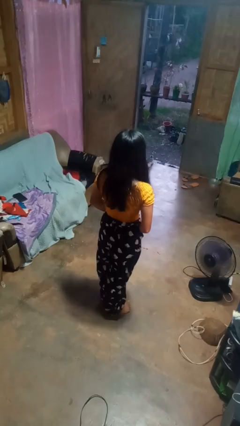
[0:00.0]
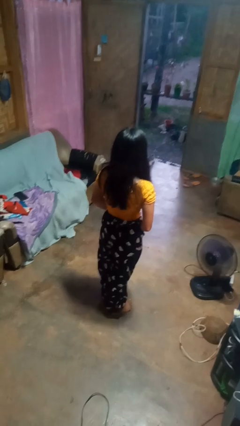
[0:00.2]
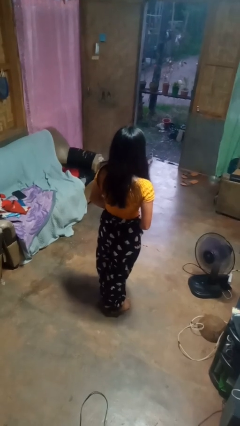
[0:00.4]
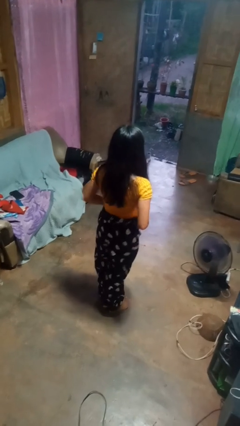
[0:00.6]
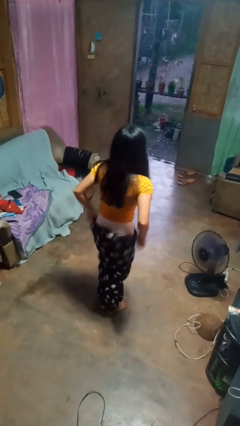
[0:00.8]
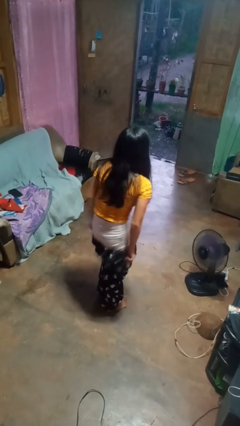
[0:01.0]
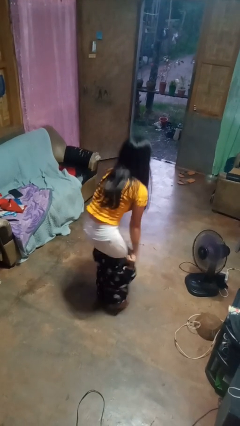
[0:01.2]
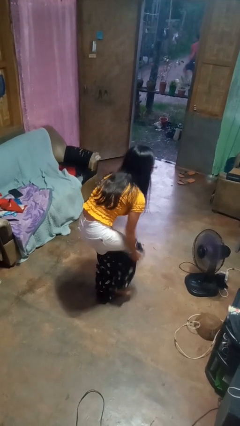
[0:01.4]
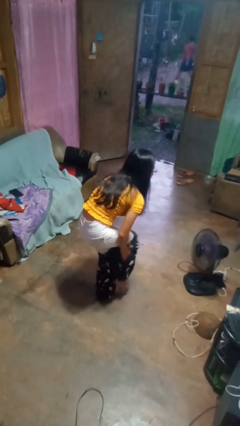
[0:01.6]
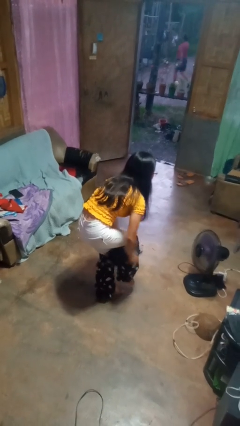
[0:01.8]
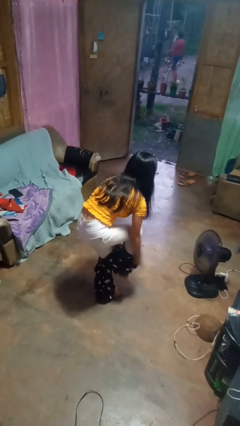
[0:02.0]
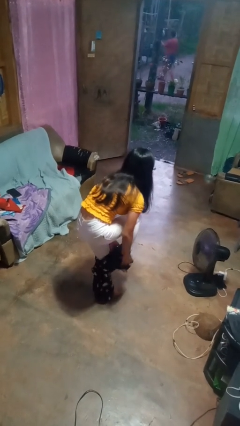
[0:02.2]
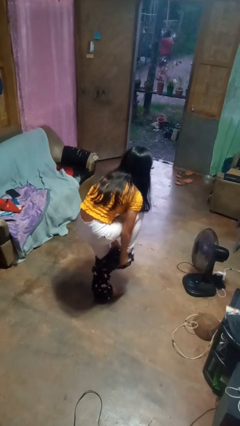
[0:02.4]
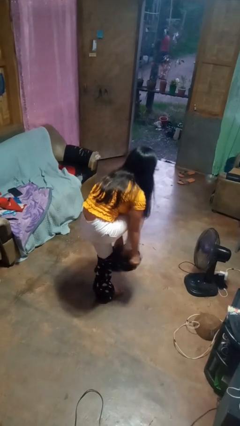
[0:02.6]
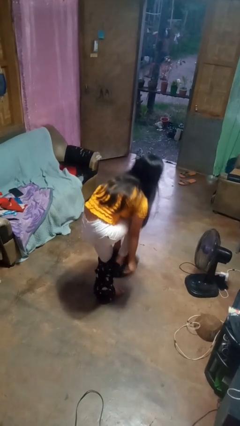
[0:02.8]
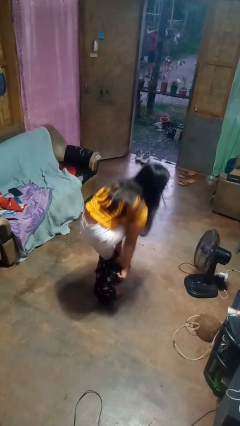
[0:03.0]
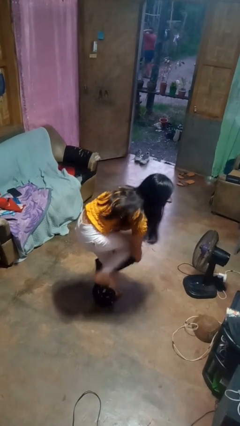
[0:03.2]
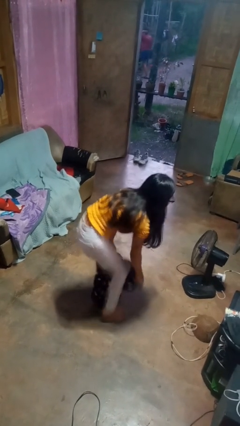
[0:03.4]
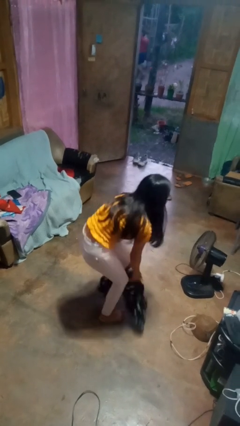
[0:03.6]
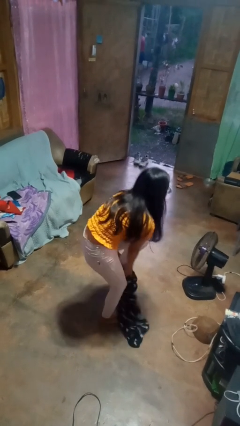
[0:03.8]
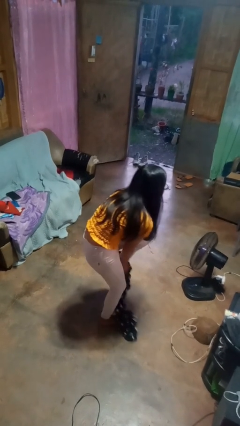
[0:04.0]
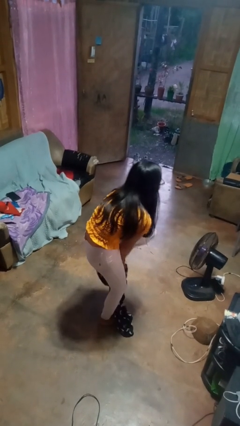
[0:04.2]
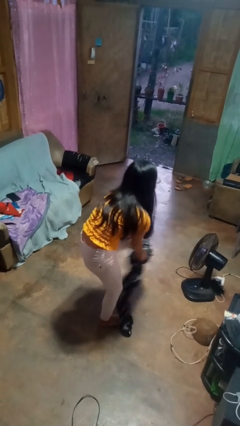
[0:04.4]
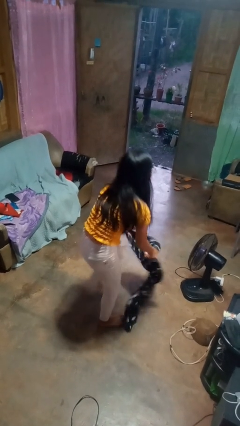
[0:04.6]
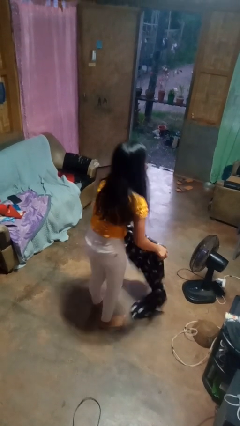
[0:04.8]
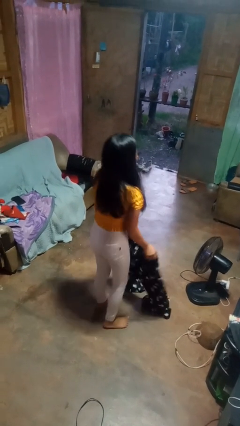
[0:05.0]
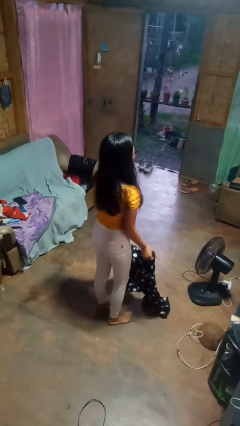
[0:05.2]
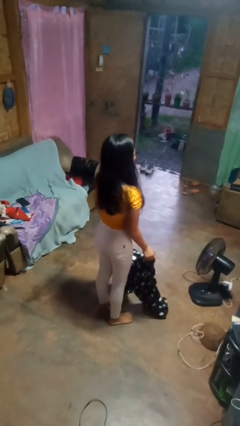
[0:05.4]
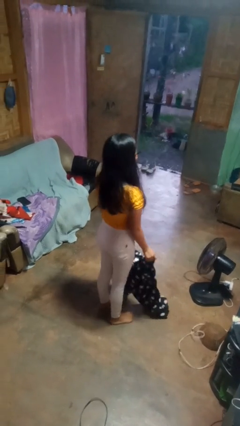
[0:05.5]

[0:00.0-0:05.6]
person takes off pants

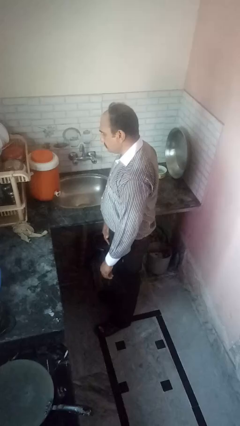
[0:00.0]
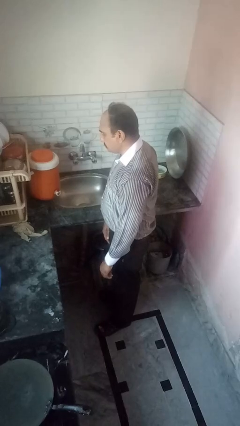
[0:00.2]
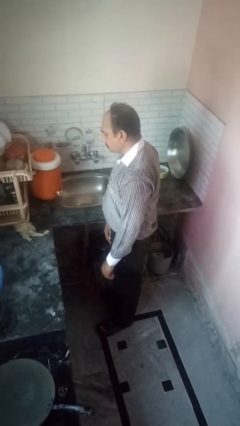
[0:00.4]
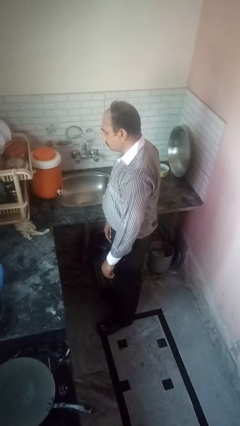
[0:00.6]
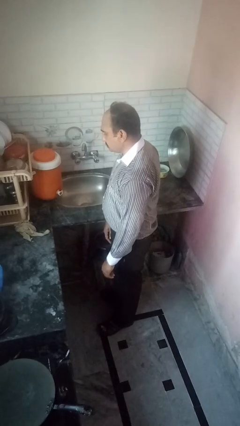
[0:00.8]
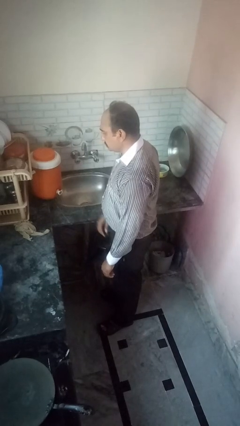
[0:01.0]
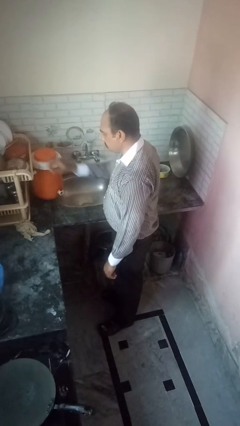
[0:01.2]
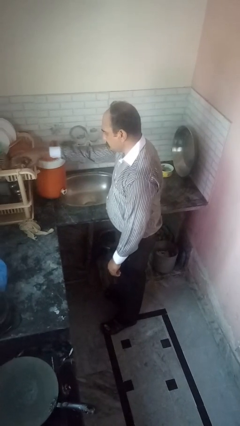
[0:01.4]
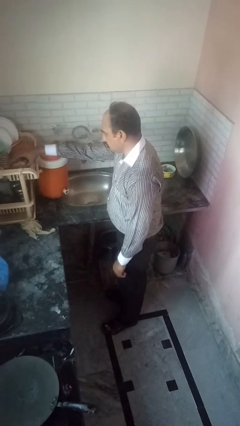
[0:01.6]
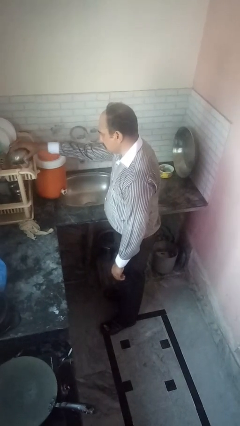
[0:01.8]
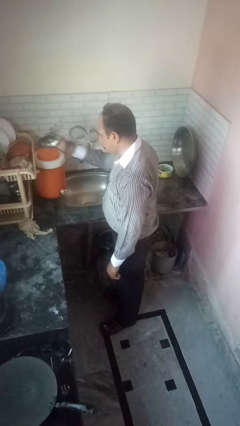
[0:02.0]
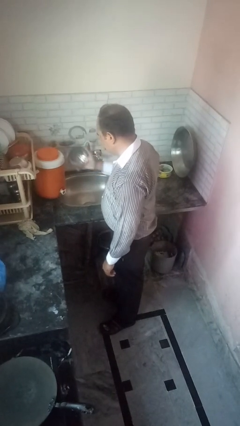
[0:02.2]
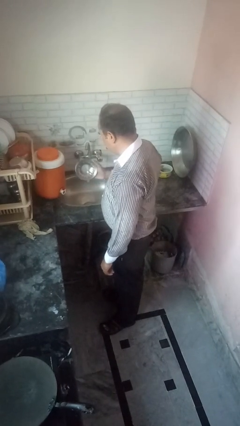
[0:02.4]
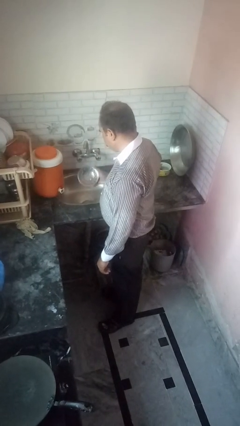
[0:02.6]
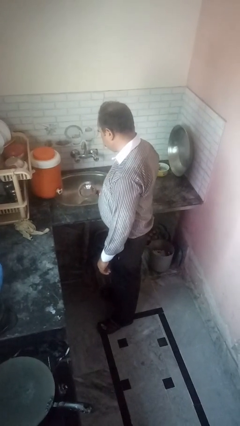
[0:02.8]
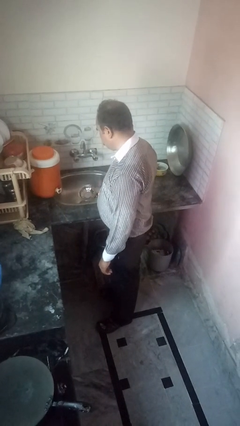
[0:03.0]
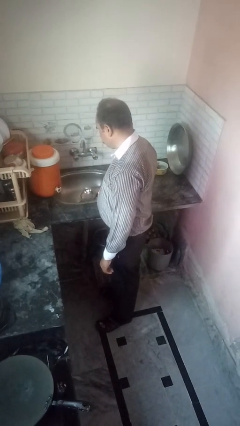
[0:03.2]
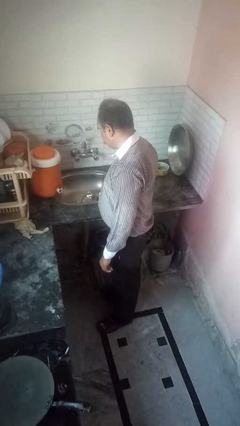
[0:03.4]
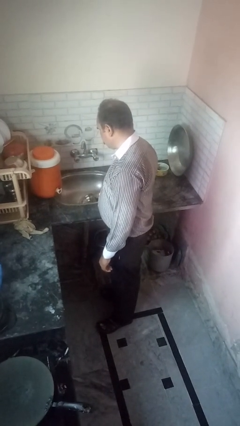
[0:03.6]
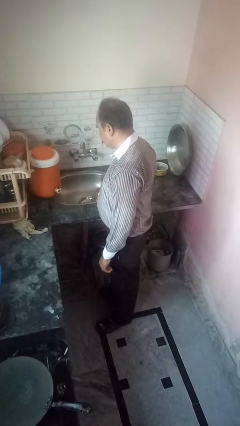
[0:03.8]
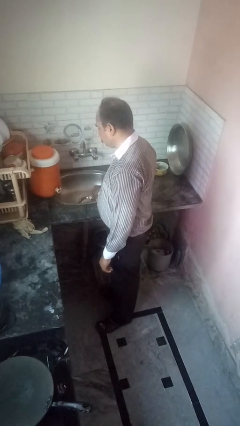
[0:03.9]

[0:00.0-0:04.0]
person loads dishwasher

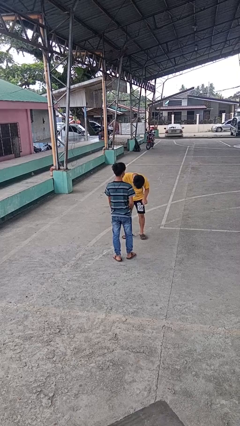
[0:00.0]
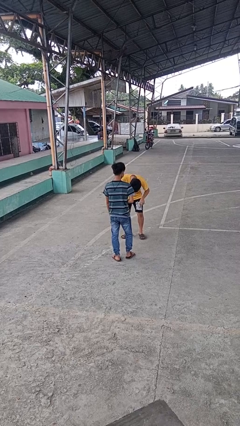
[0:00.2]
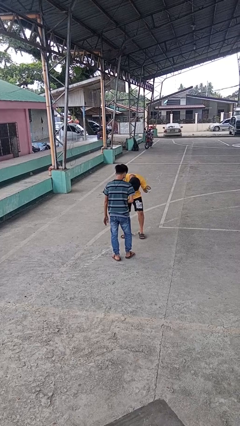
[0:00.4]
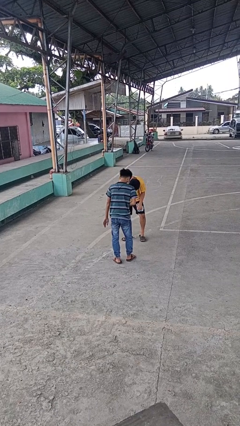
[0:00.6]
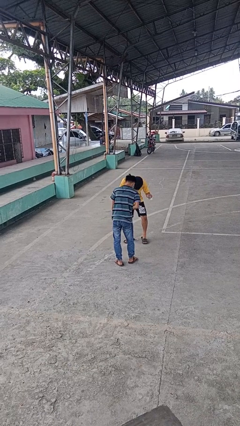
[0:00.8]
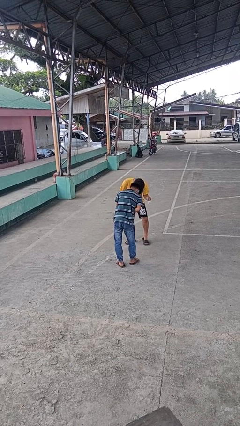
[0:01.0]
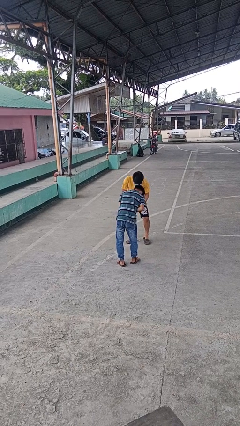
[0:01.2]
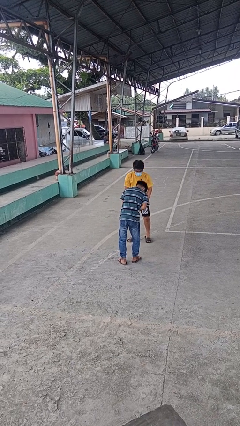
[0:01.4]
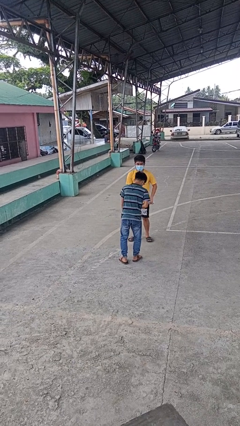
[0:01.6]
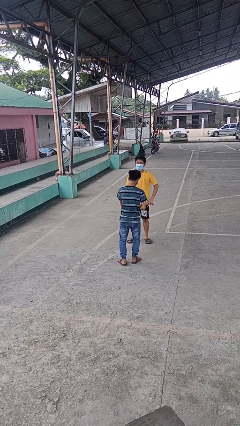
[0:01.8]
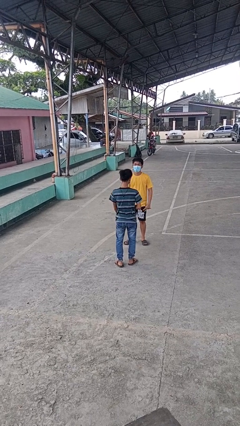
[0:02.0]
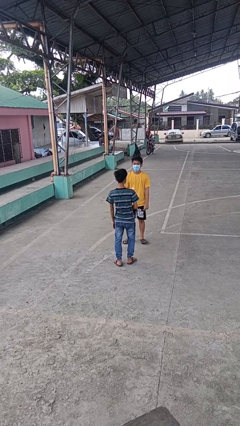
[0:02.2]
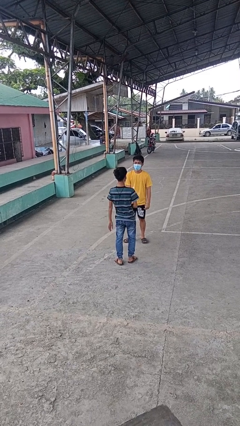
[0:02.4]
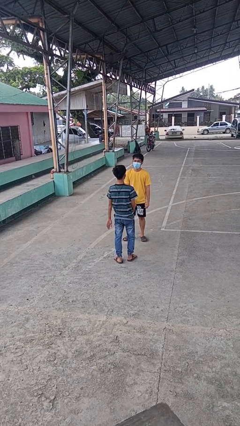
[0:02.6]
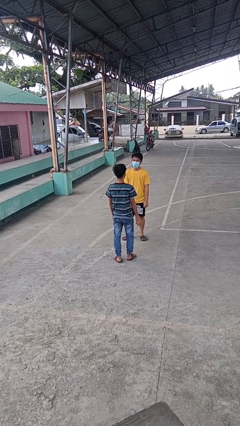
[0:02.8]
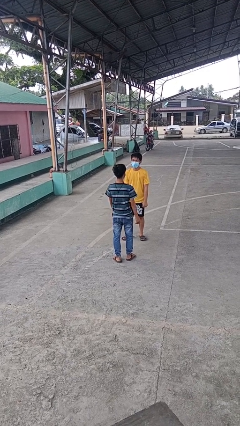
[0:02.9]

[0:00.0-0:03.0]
person laughs with person

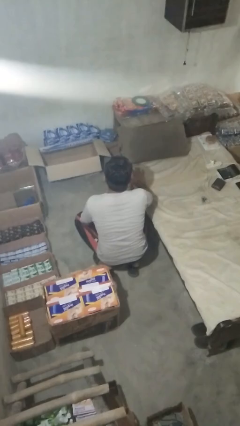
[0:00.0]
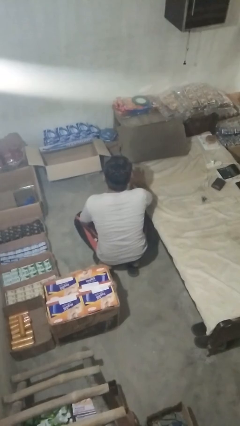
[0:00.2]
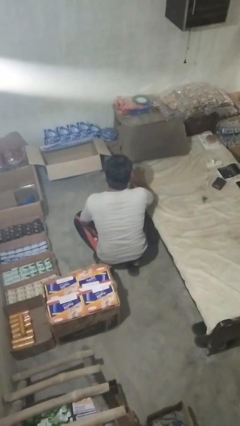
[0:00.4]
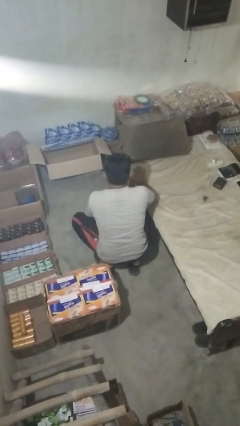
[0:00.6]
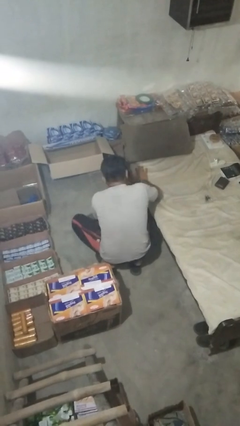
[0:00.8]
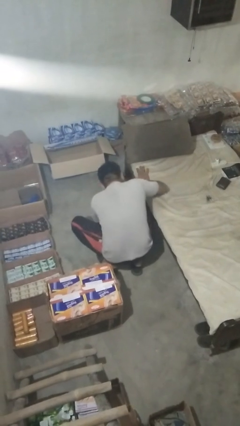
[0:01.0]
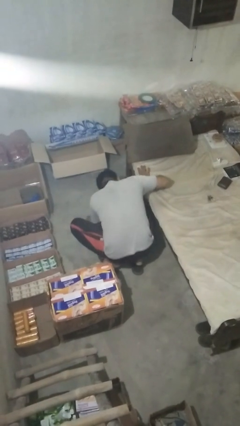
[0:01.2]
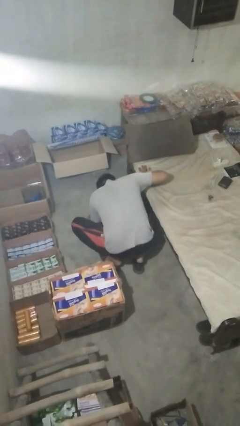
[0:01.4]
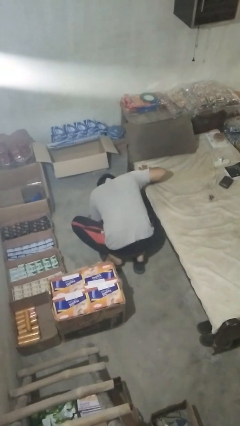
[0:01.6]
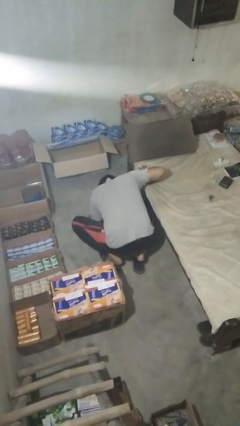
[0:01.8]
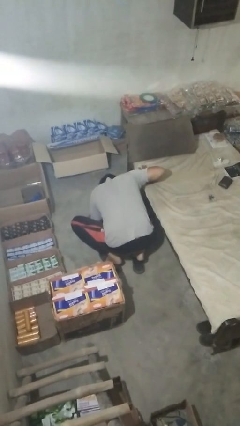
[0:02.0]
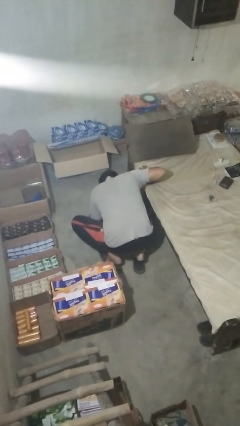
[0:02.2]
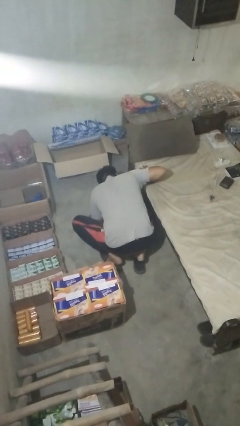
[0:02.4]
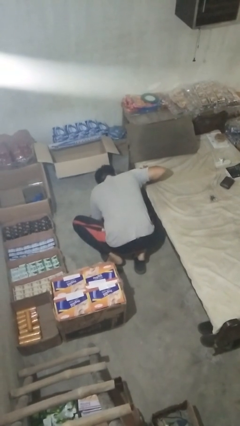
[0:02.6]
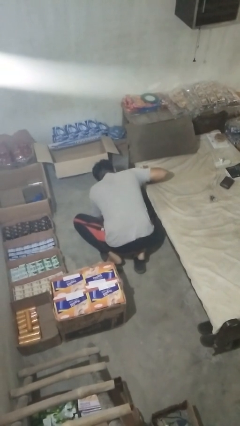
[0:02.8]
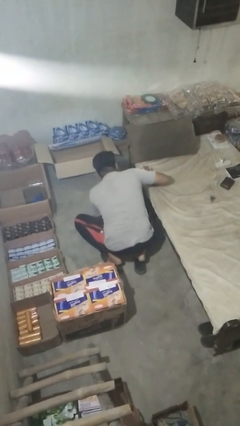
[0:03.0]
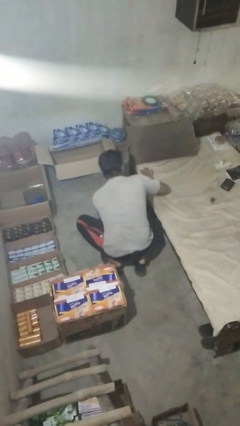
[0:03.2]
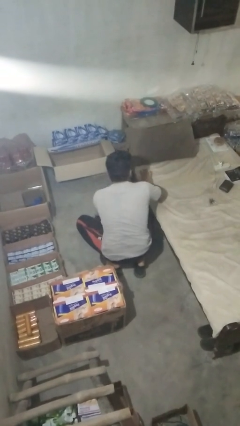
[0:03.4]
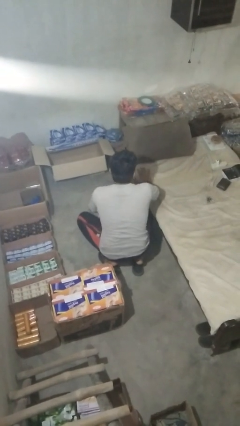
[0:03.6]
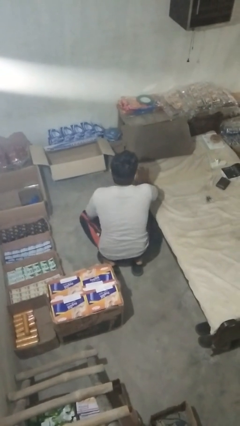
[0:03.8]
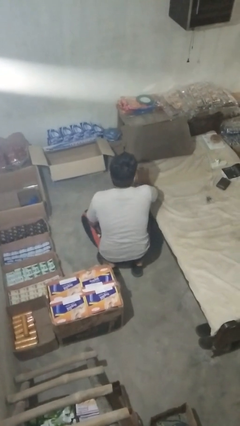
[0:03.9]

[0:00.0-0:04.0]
person searches under bed

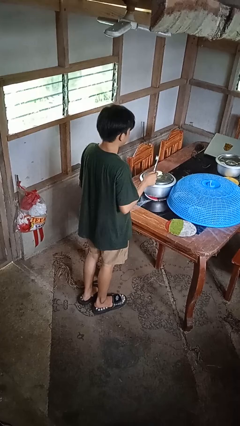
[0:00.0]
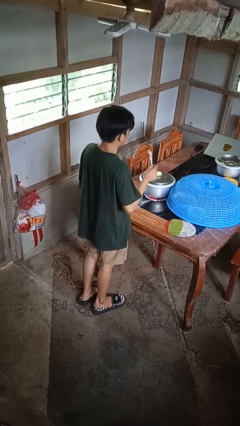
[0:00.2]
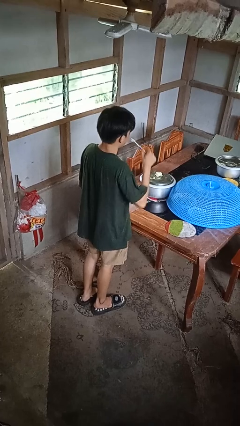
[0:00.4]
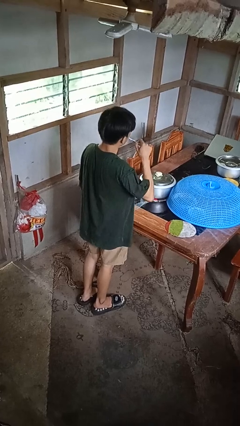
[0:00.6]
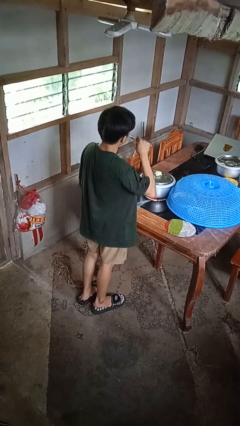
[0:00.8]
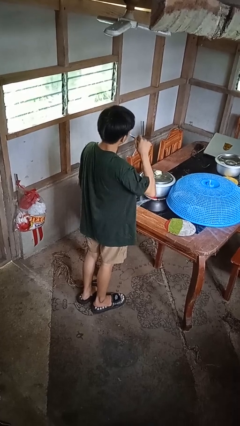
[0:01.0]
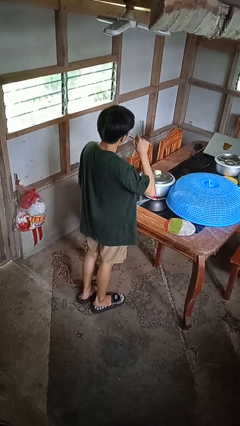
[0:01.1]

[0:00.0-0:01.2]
person brushes teeth
